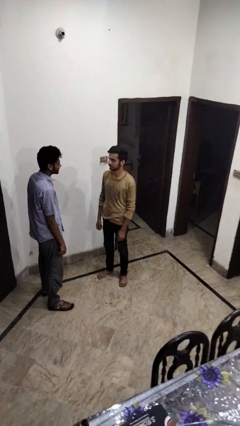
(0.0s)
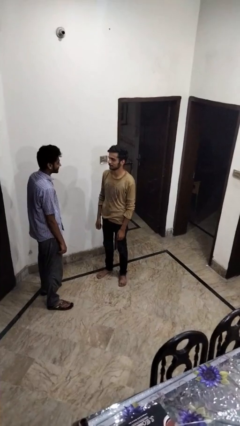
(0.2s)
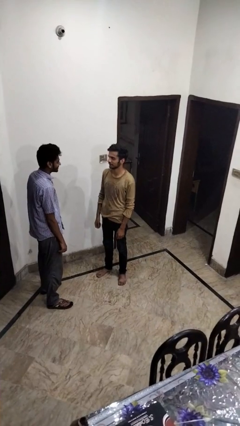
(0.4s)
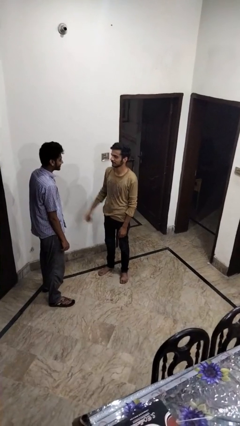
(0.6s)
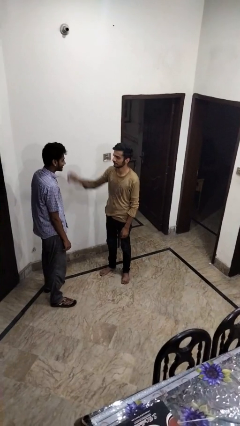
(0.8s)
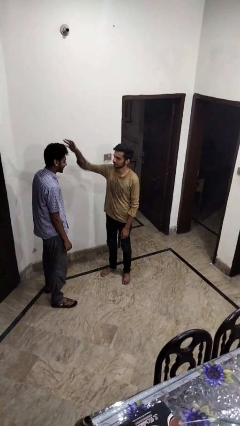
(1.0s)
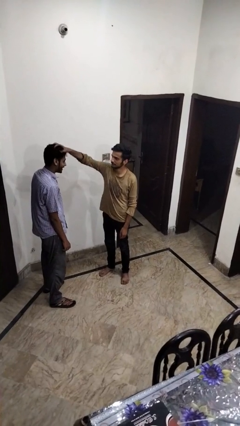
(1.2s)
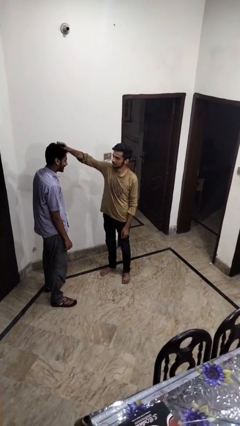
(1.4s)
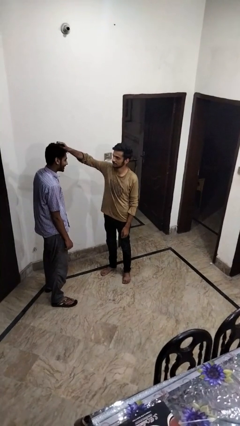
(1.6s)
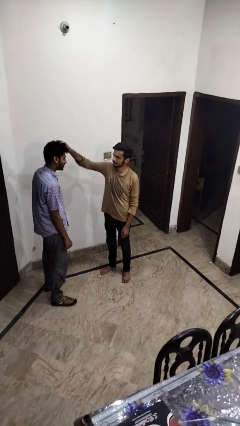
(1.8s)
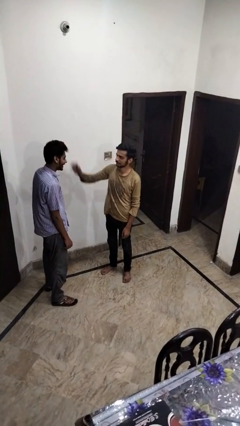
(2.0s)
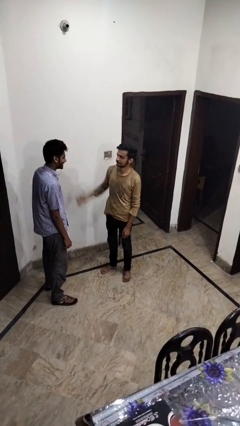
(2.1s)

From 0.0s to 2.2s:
person grabs person by hair

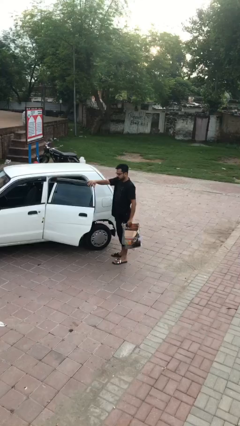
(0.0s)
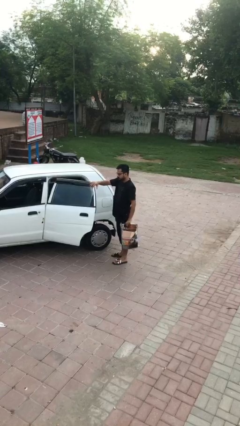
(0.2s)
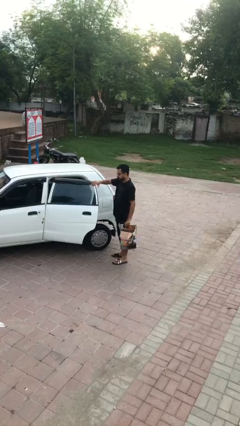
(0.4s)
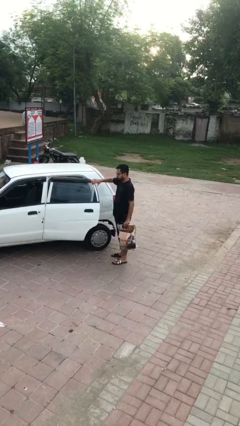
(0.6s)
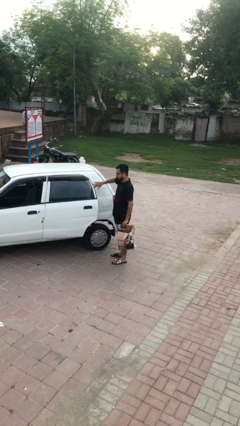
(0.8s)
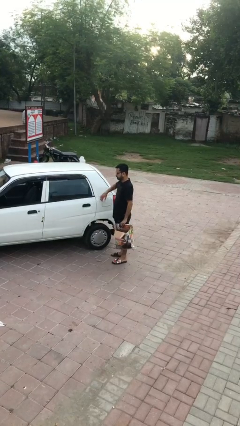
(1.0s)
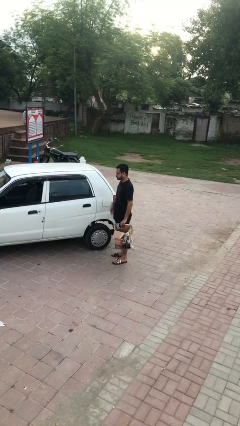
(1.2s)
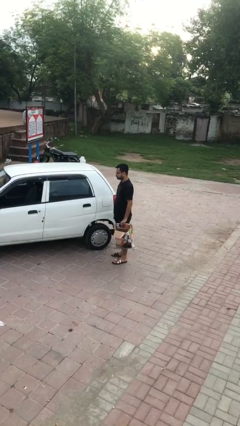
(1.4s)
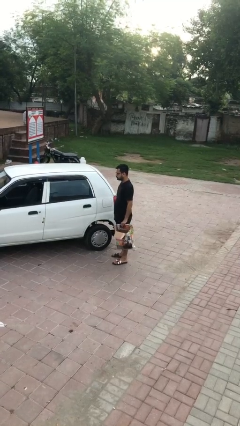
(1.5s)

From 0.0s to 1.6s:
person closes car door

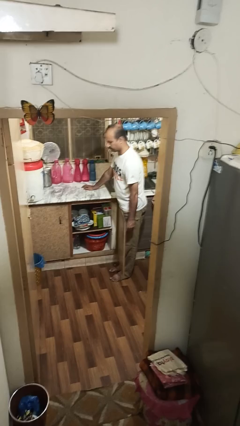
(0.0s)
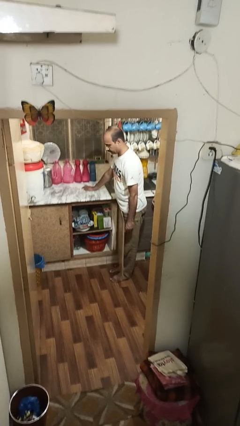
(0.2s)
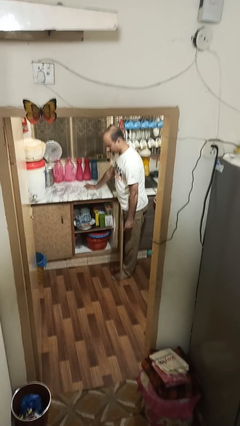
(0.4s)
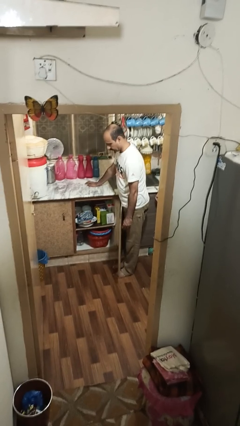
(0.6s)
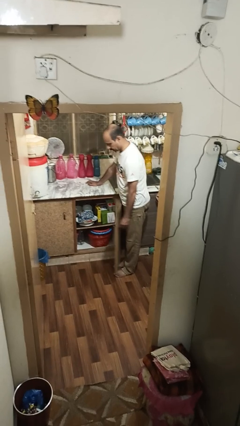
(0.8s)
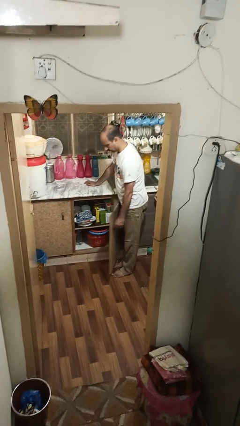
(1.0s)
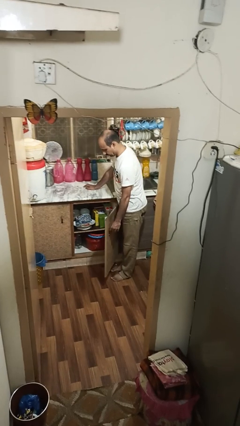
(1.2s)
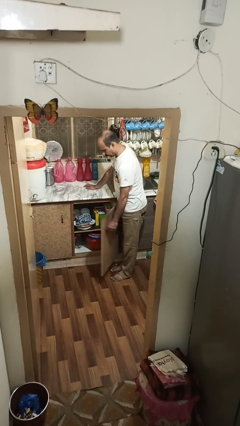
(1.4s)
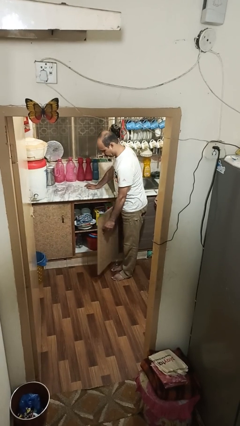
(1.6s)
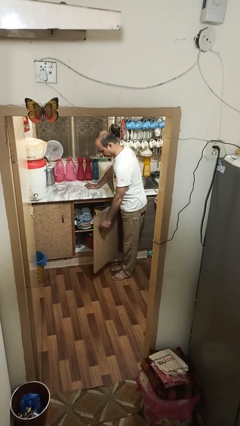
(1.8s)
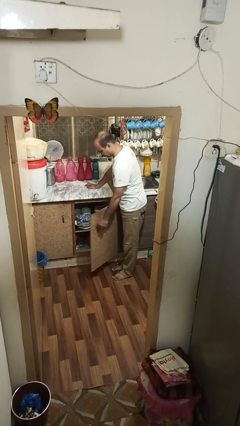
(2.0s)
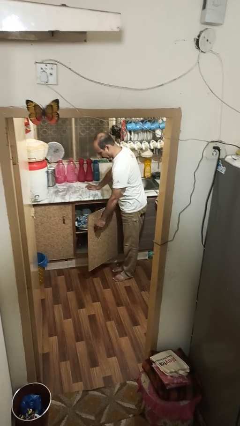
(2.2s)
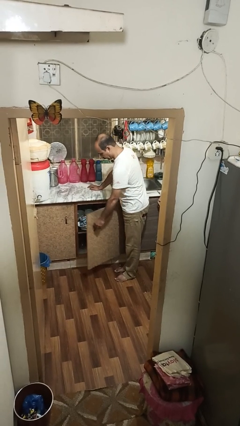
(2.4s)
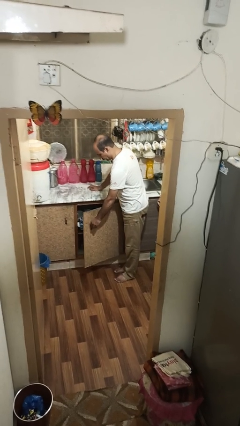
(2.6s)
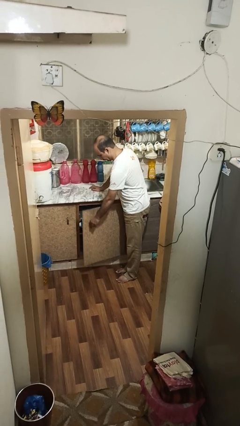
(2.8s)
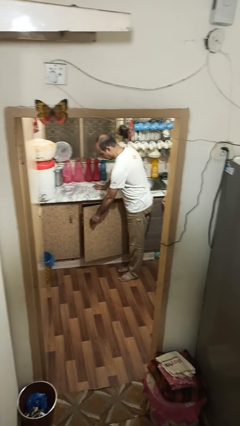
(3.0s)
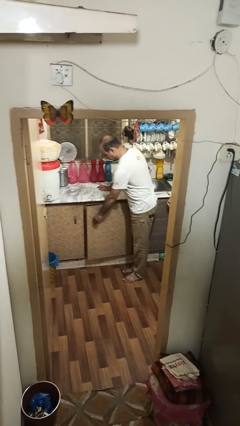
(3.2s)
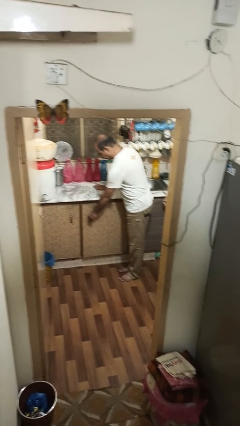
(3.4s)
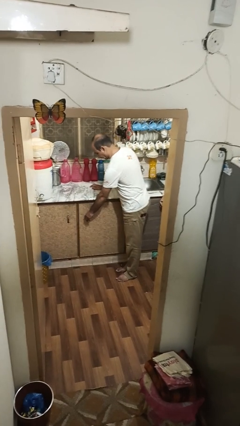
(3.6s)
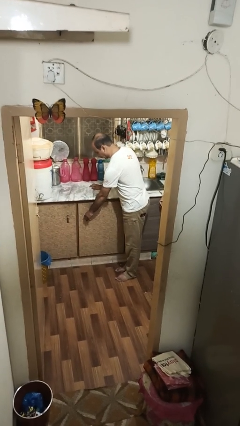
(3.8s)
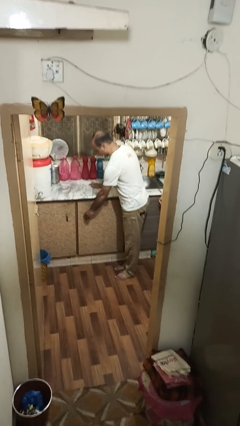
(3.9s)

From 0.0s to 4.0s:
person closes cabinet

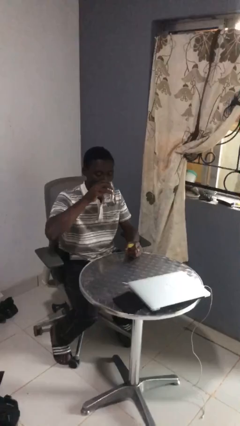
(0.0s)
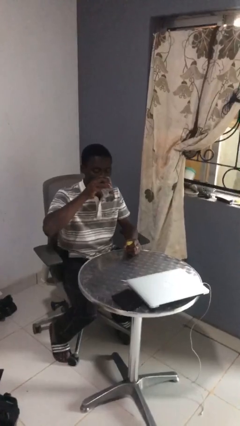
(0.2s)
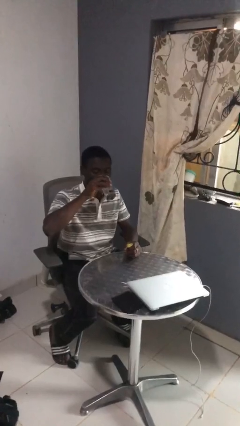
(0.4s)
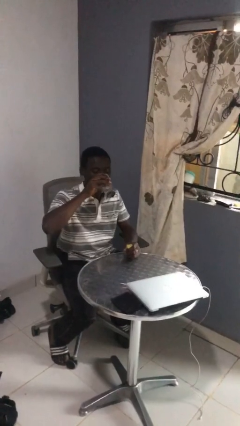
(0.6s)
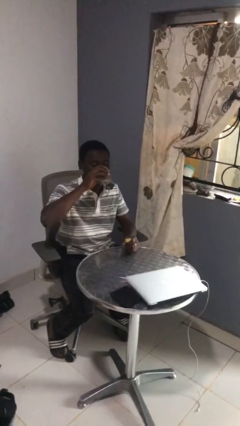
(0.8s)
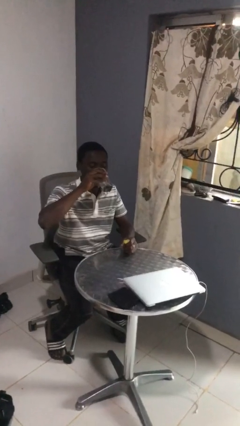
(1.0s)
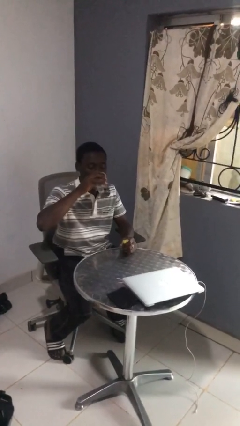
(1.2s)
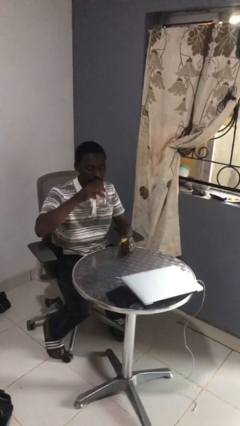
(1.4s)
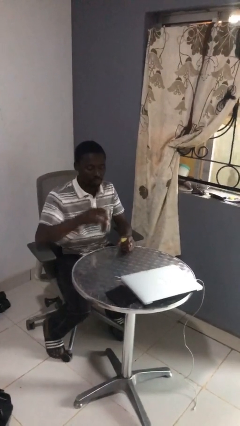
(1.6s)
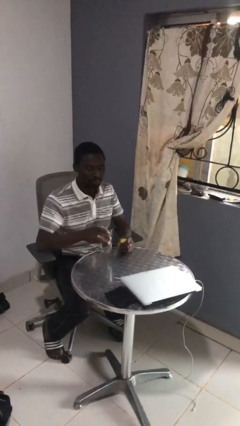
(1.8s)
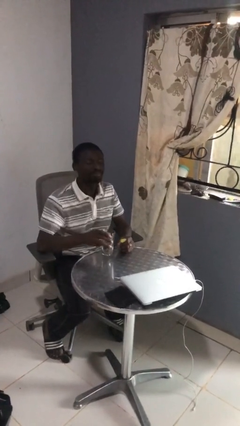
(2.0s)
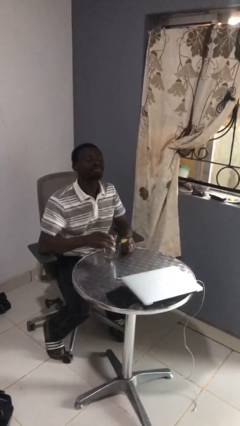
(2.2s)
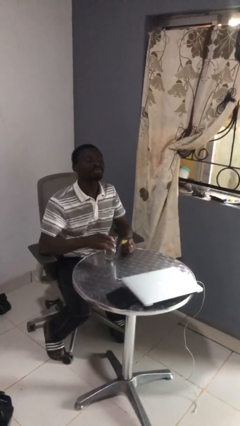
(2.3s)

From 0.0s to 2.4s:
person drinks from cup

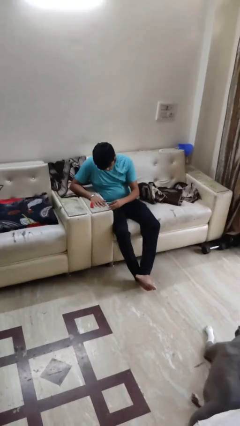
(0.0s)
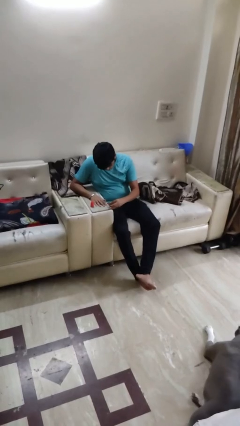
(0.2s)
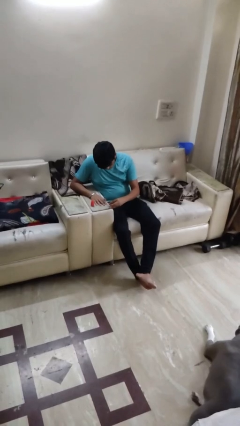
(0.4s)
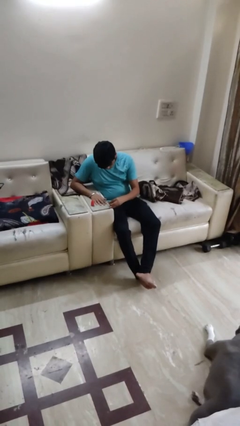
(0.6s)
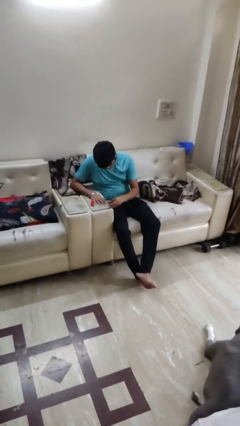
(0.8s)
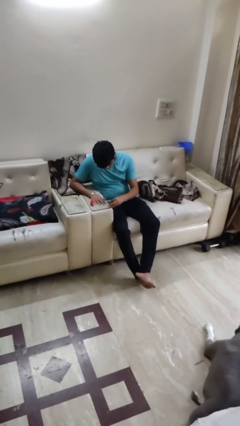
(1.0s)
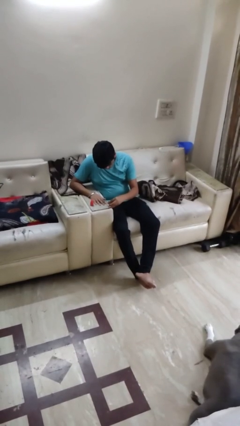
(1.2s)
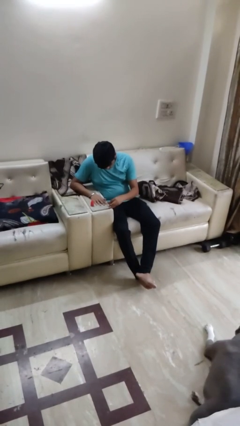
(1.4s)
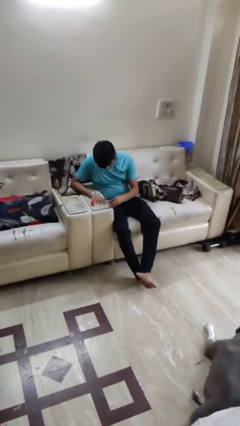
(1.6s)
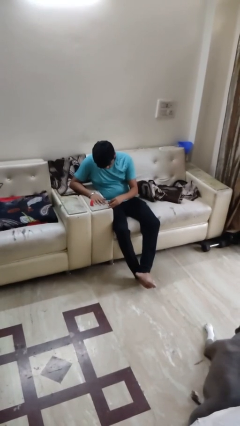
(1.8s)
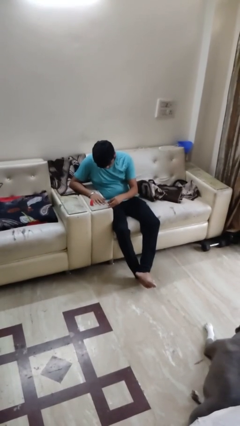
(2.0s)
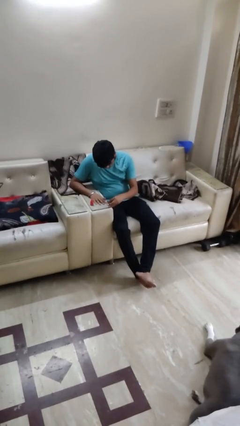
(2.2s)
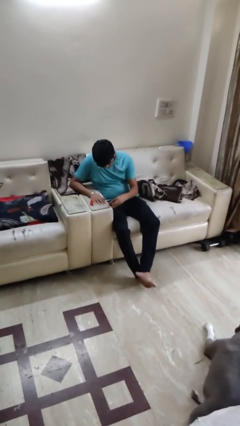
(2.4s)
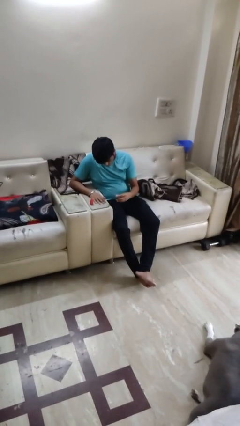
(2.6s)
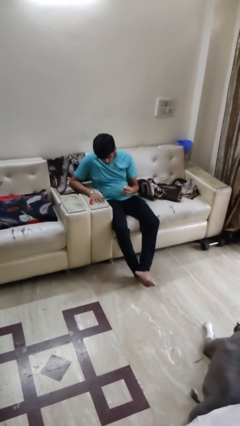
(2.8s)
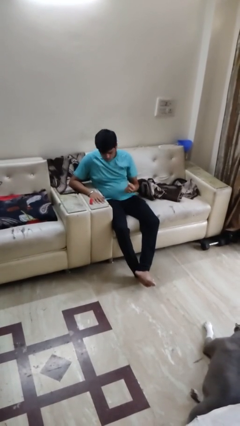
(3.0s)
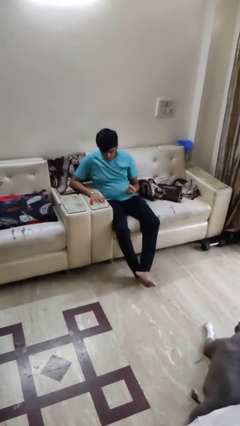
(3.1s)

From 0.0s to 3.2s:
person paints fingernails

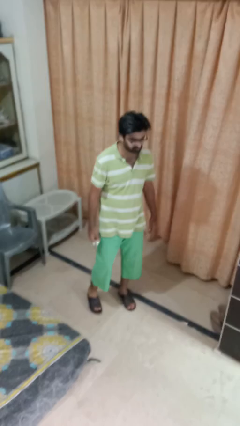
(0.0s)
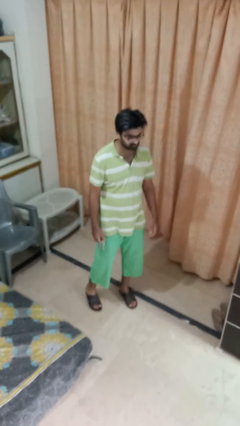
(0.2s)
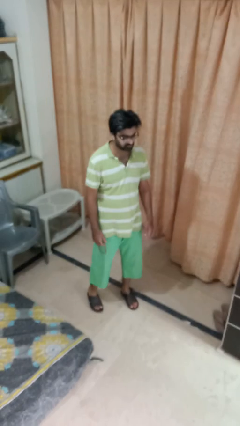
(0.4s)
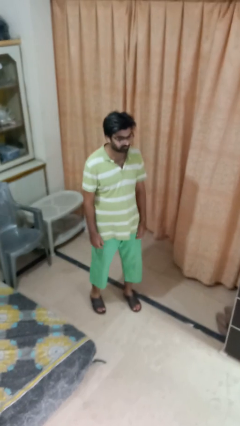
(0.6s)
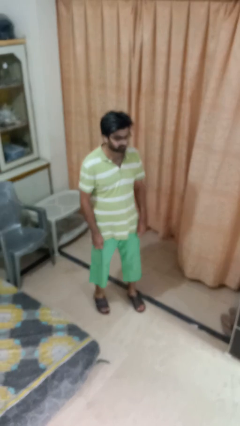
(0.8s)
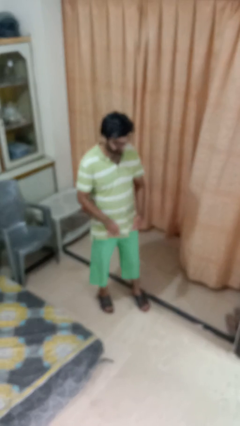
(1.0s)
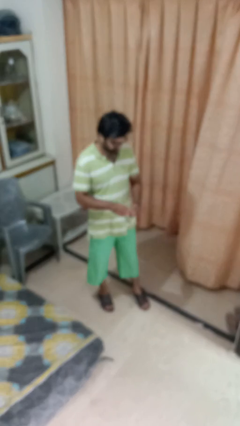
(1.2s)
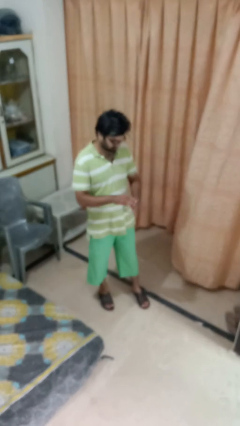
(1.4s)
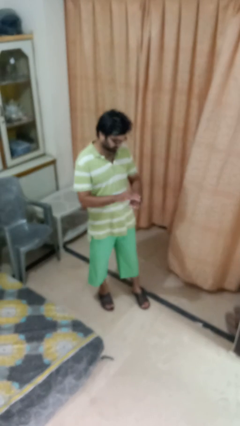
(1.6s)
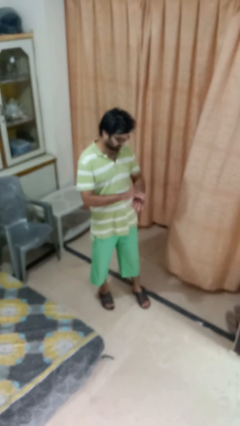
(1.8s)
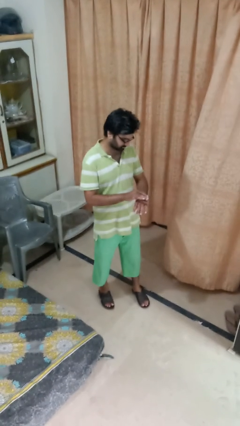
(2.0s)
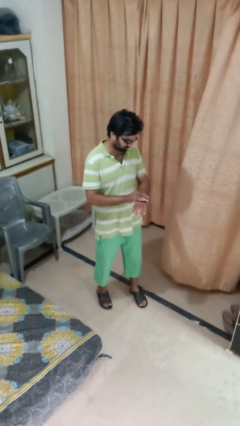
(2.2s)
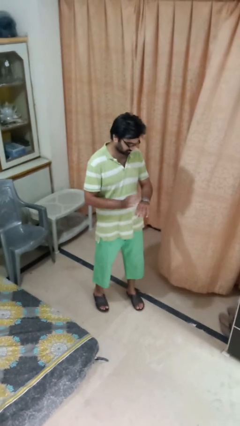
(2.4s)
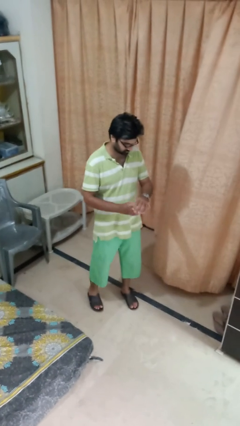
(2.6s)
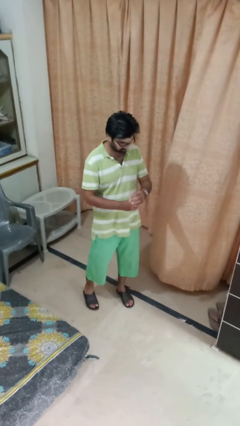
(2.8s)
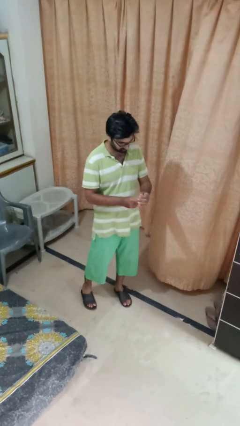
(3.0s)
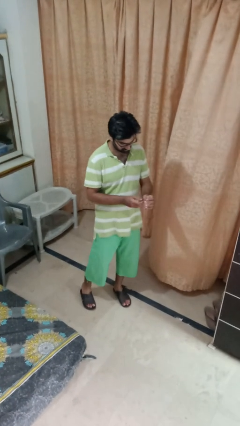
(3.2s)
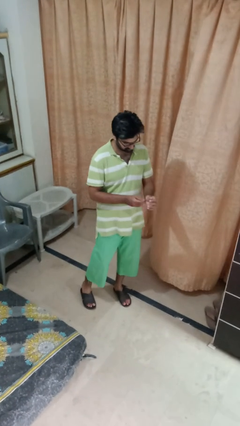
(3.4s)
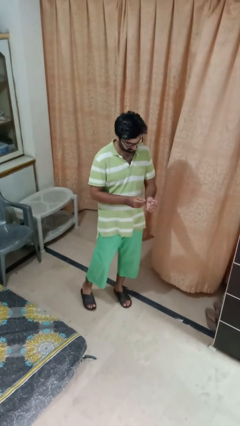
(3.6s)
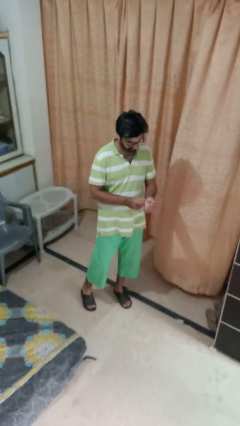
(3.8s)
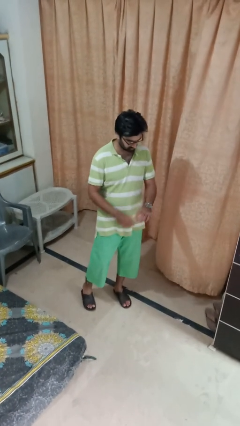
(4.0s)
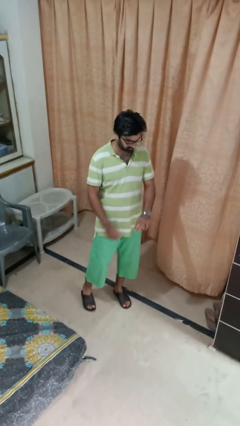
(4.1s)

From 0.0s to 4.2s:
person puts on wristwatch
